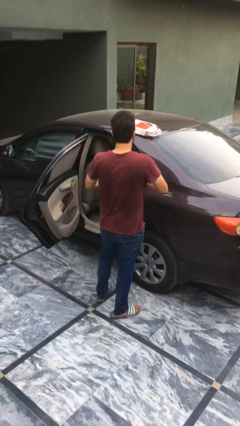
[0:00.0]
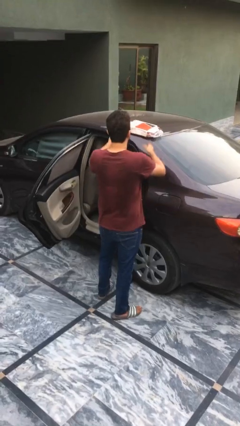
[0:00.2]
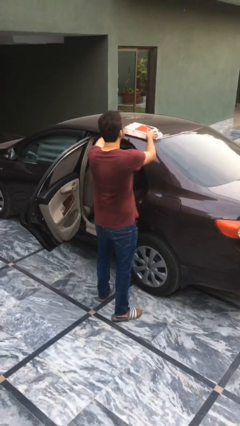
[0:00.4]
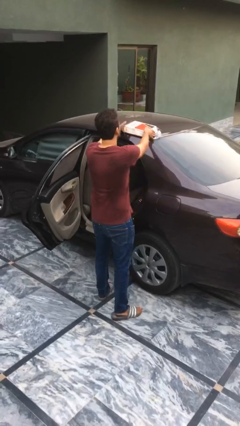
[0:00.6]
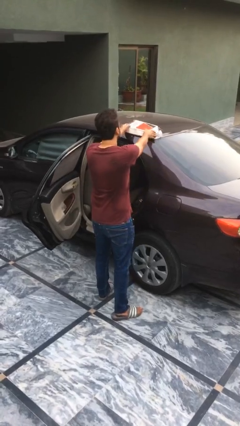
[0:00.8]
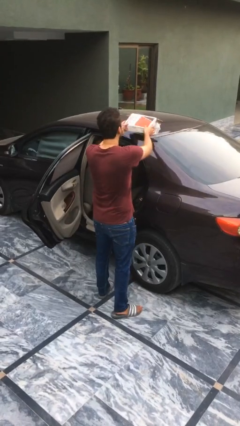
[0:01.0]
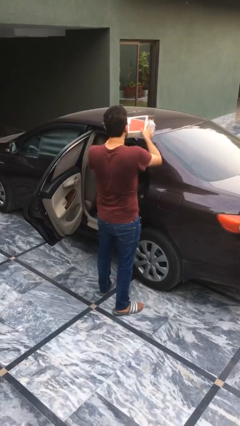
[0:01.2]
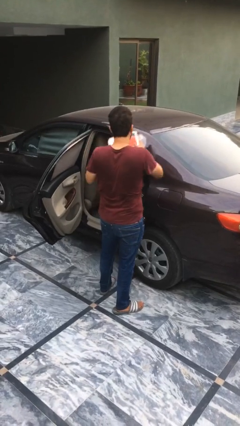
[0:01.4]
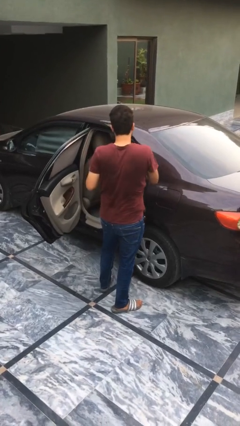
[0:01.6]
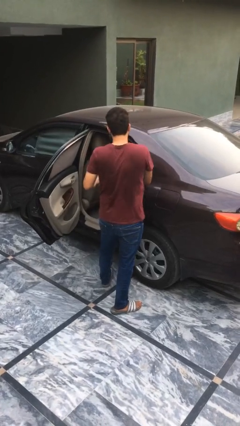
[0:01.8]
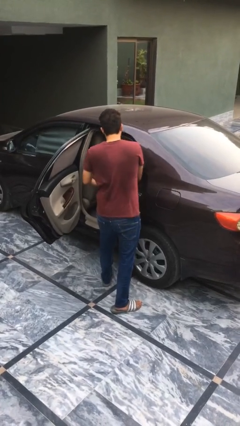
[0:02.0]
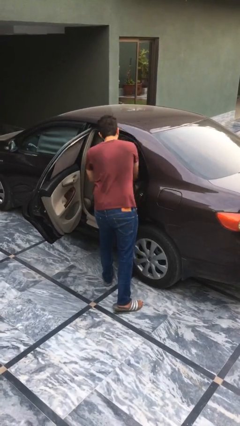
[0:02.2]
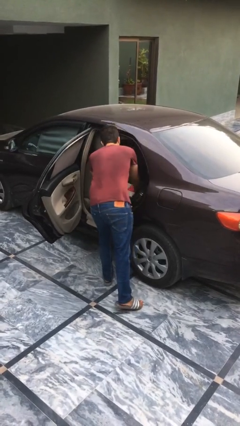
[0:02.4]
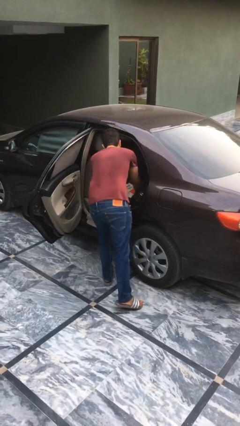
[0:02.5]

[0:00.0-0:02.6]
person loads car

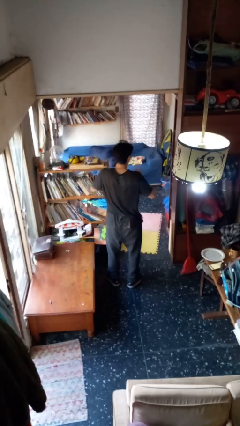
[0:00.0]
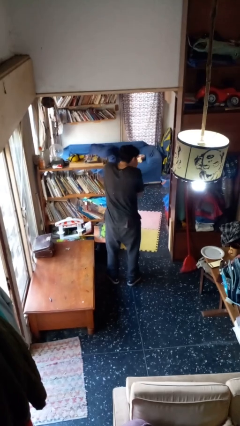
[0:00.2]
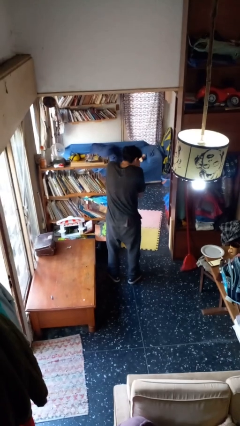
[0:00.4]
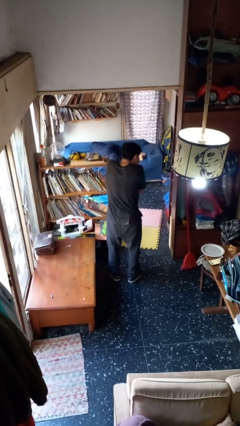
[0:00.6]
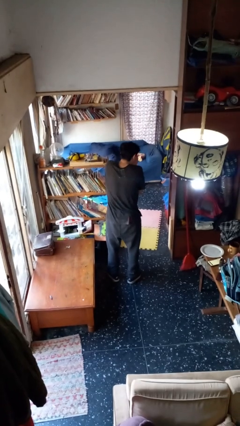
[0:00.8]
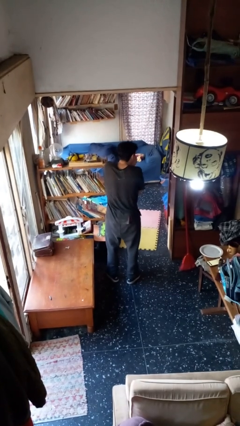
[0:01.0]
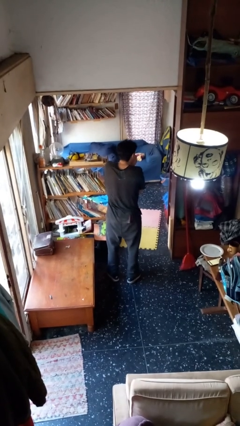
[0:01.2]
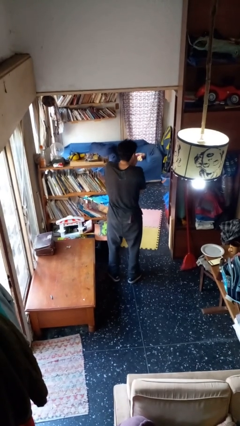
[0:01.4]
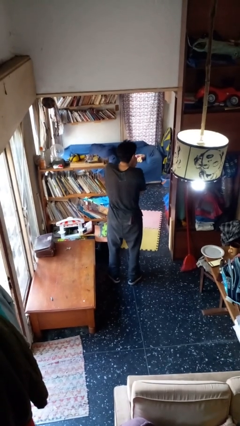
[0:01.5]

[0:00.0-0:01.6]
person sneezes into hand

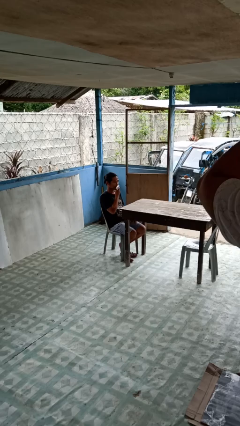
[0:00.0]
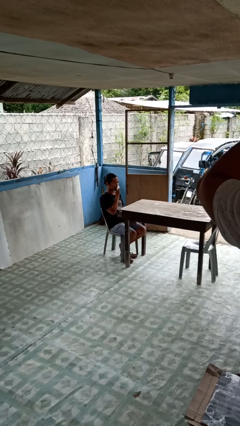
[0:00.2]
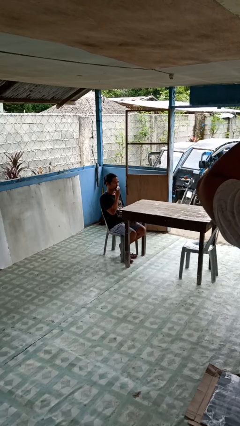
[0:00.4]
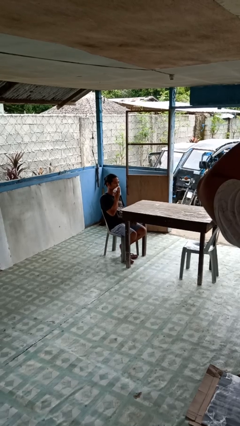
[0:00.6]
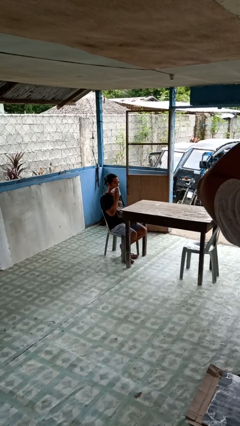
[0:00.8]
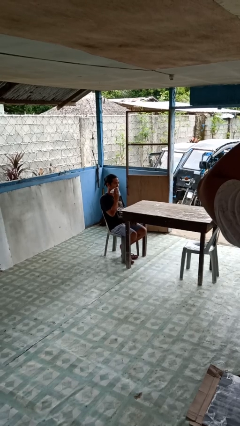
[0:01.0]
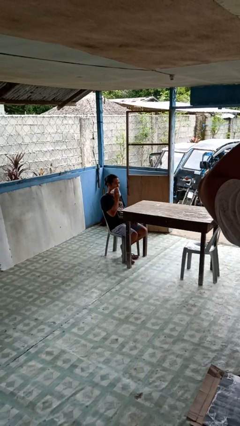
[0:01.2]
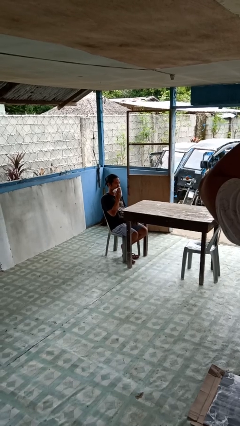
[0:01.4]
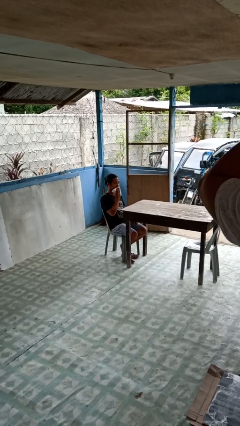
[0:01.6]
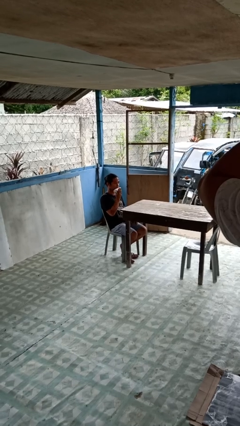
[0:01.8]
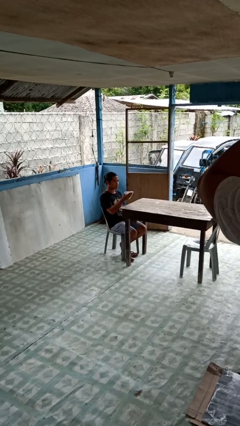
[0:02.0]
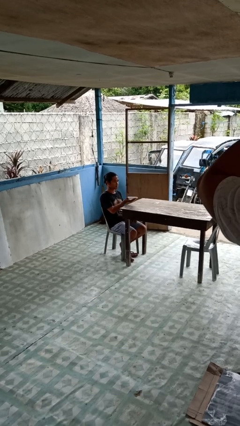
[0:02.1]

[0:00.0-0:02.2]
person wipes mouth with napkin

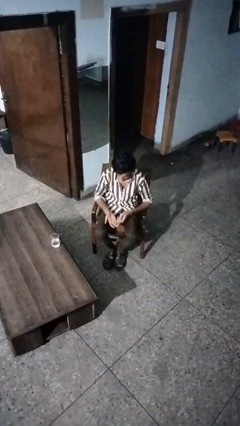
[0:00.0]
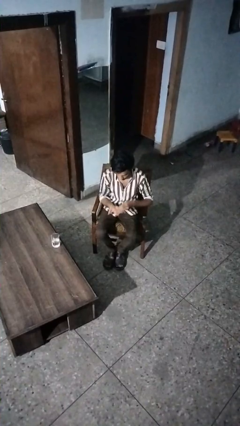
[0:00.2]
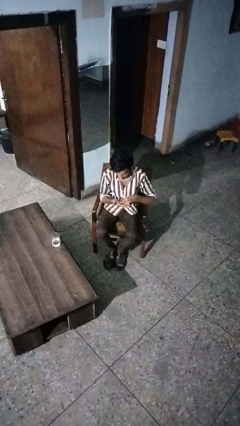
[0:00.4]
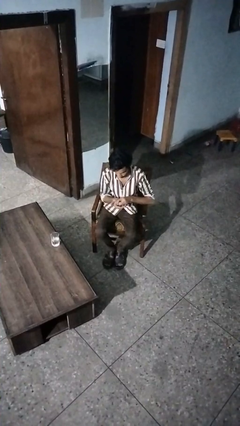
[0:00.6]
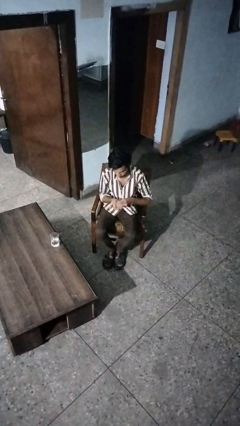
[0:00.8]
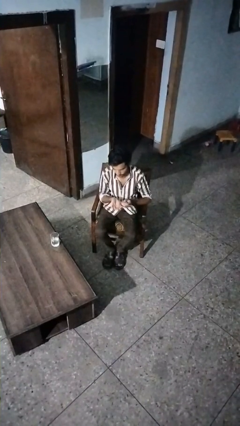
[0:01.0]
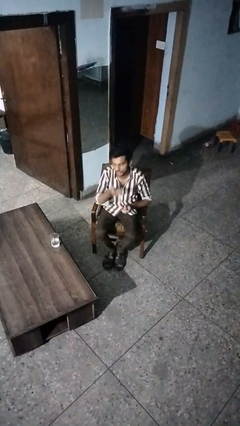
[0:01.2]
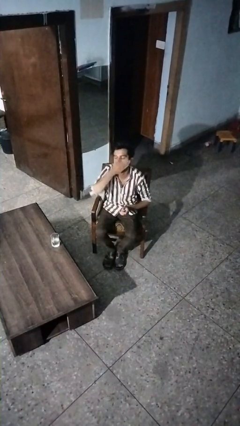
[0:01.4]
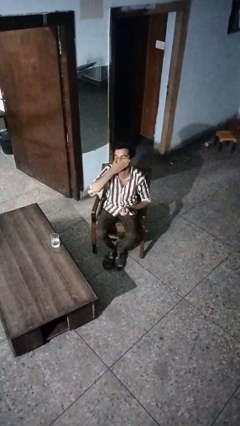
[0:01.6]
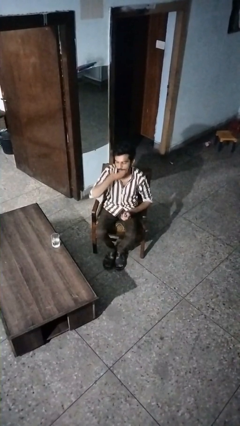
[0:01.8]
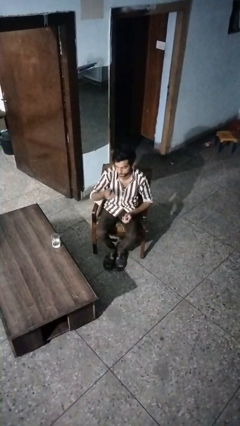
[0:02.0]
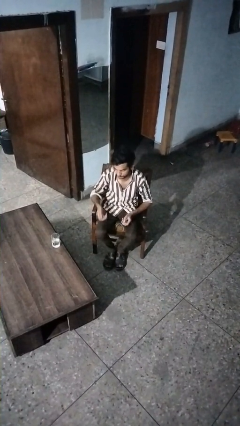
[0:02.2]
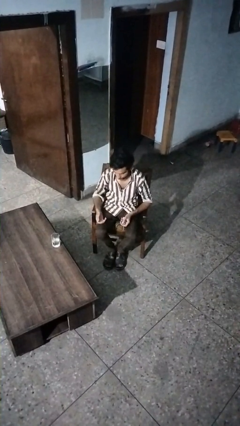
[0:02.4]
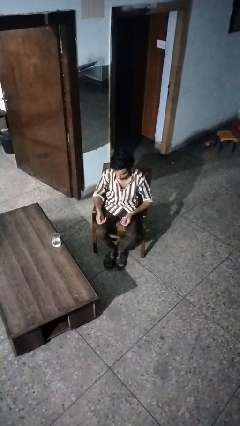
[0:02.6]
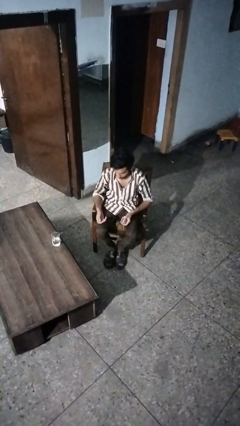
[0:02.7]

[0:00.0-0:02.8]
person takes medicine pills

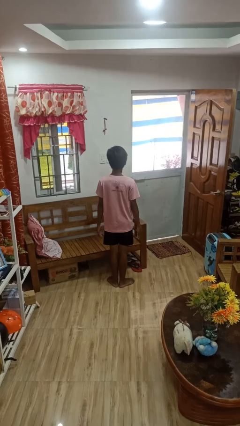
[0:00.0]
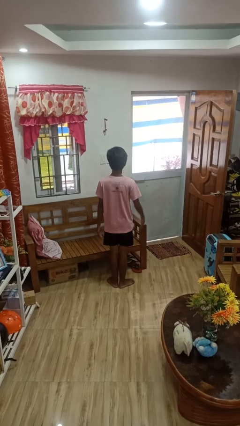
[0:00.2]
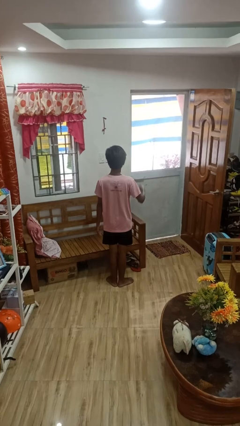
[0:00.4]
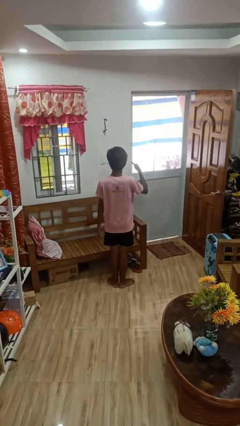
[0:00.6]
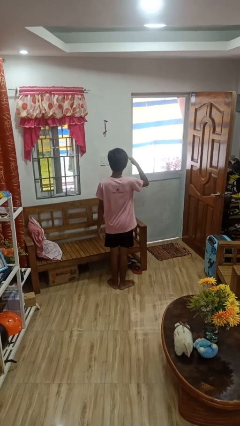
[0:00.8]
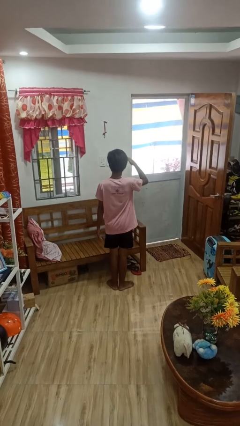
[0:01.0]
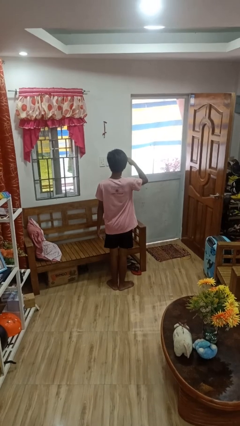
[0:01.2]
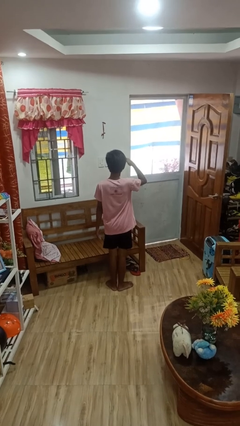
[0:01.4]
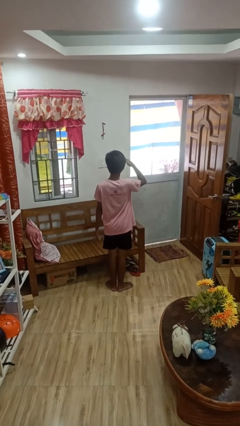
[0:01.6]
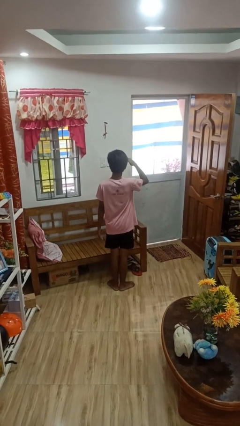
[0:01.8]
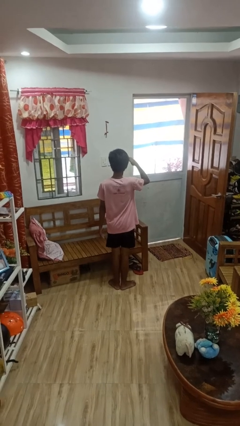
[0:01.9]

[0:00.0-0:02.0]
person salutes

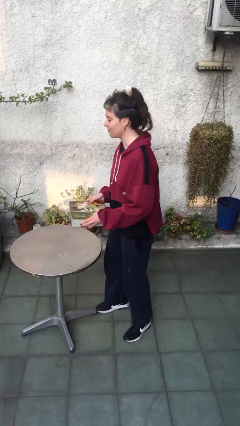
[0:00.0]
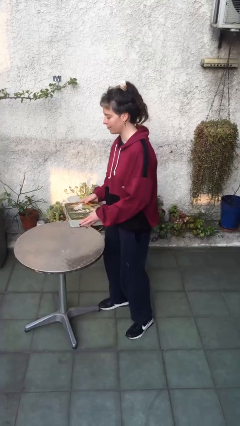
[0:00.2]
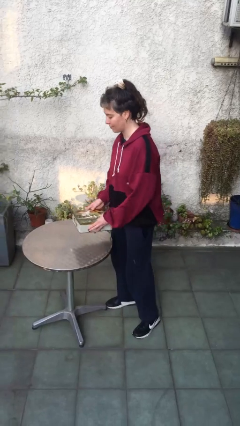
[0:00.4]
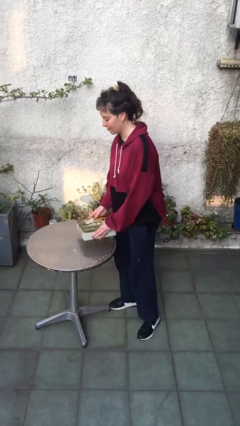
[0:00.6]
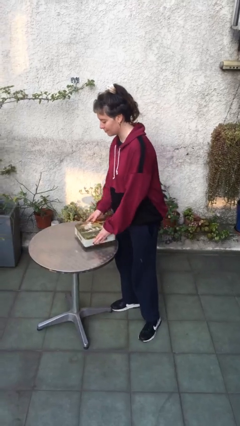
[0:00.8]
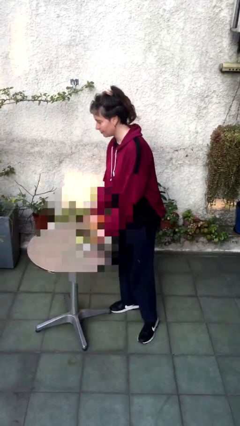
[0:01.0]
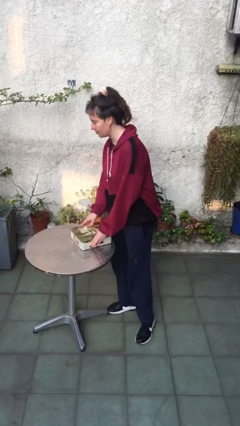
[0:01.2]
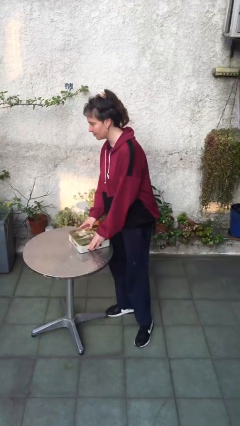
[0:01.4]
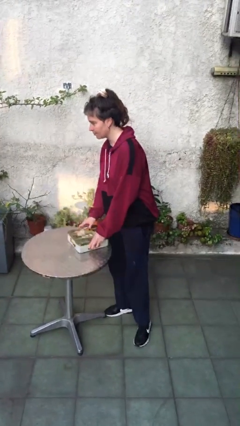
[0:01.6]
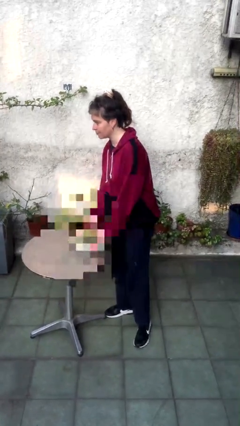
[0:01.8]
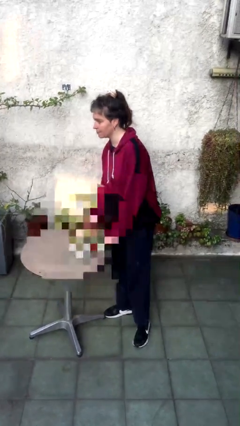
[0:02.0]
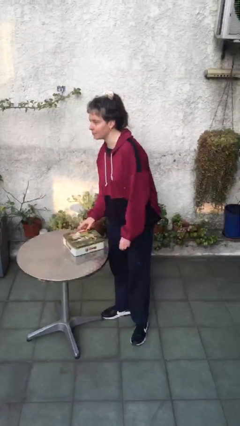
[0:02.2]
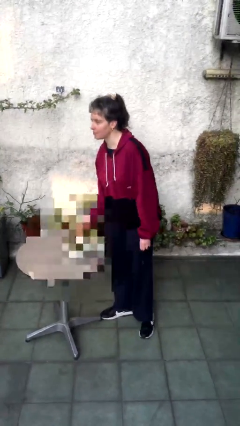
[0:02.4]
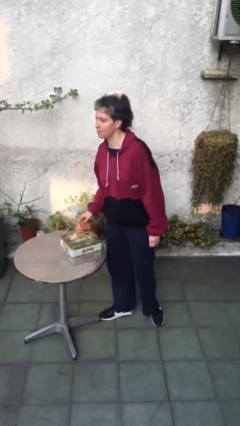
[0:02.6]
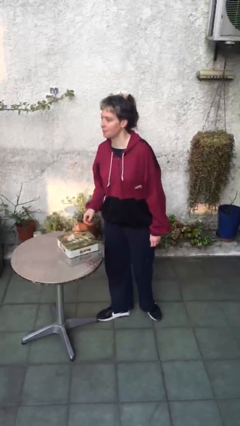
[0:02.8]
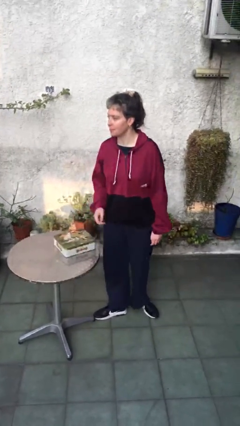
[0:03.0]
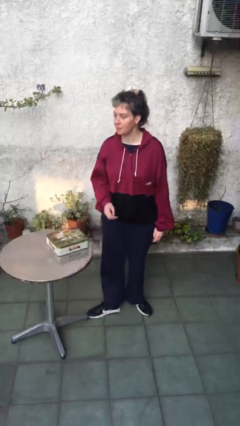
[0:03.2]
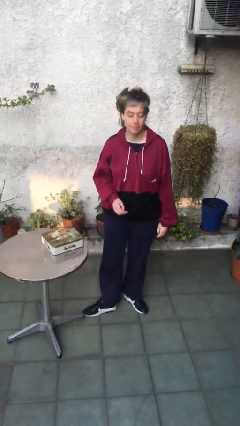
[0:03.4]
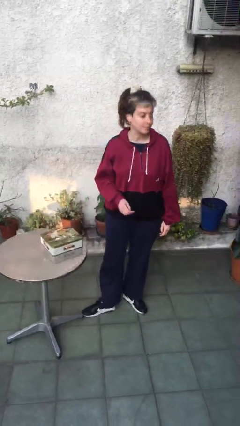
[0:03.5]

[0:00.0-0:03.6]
person puts down object on table

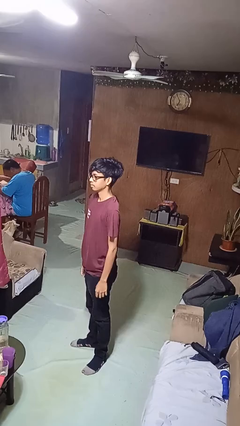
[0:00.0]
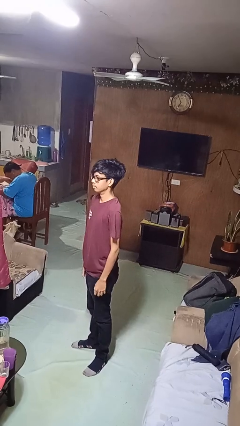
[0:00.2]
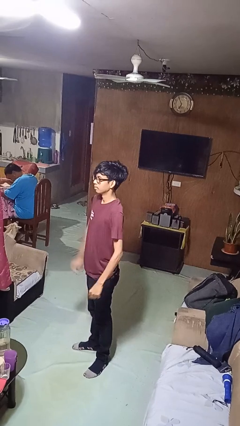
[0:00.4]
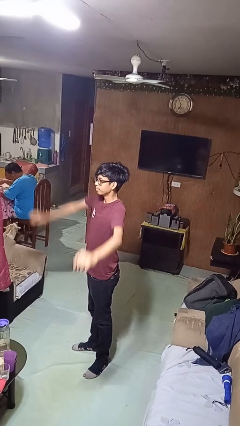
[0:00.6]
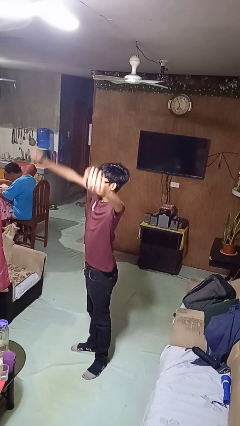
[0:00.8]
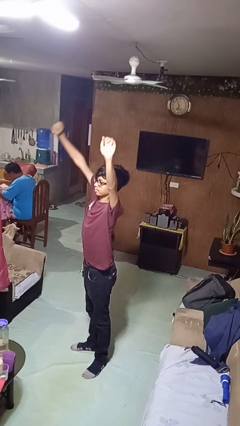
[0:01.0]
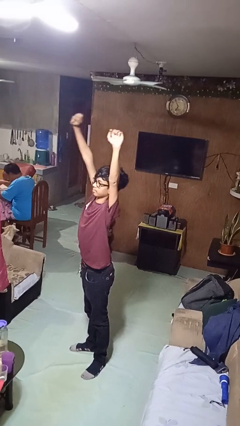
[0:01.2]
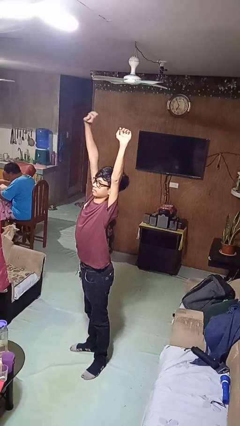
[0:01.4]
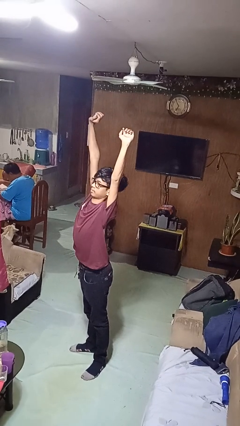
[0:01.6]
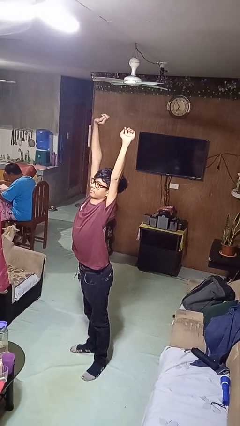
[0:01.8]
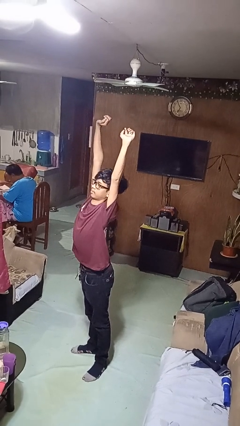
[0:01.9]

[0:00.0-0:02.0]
person stretches arms over head

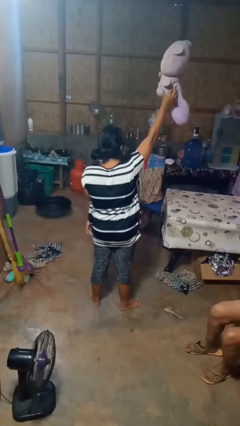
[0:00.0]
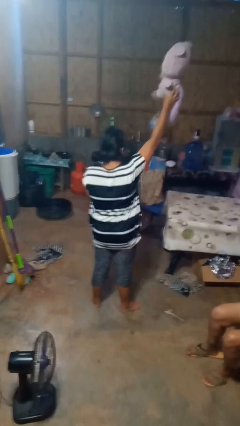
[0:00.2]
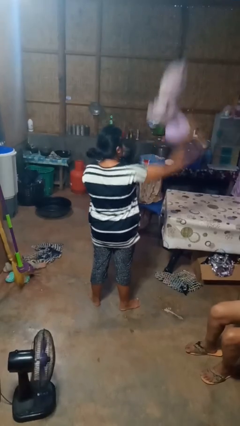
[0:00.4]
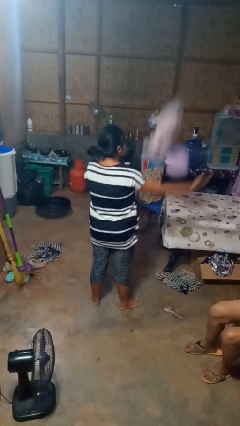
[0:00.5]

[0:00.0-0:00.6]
person drops object
